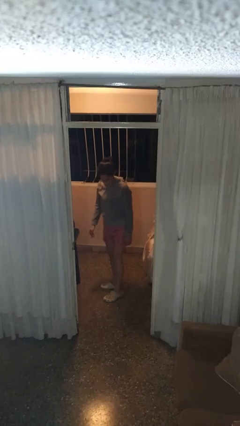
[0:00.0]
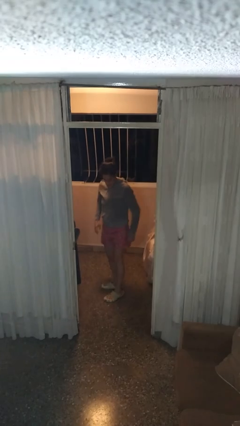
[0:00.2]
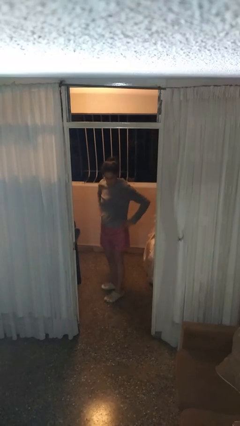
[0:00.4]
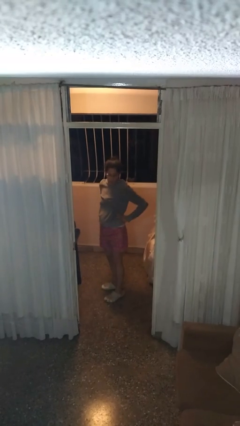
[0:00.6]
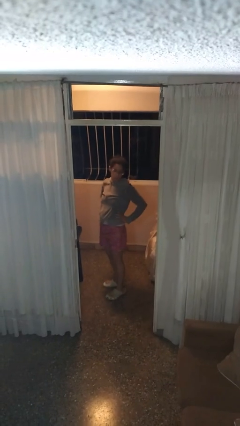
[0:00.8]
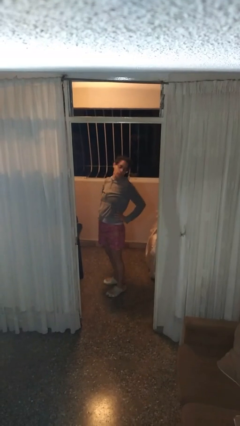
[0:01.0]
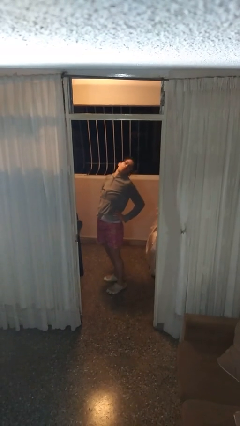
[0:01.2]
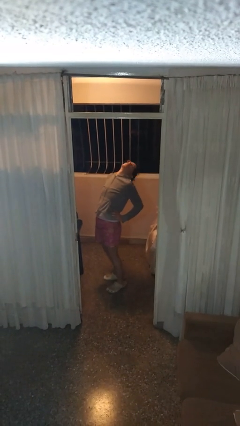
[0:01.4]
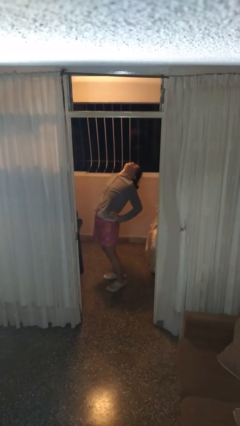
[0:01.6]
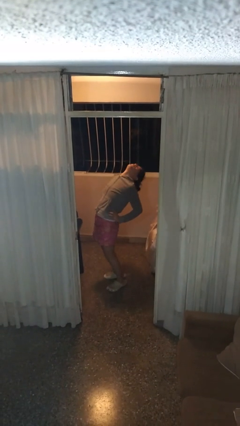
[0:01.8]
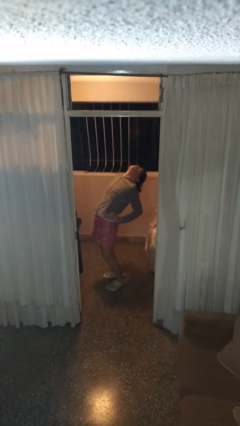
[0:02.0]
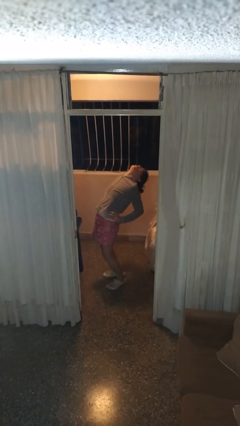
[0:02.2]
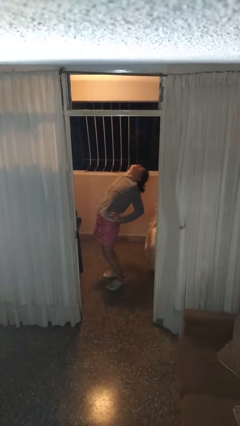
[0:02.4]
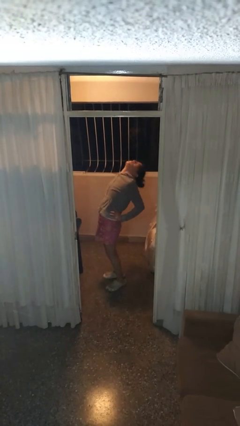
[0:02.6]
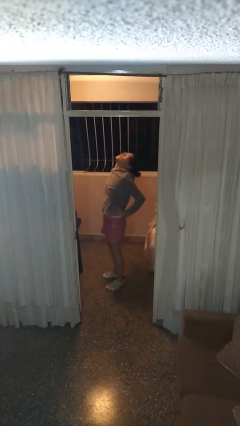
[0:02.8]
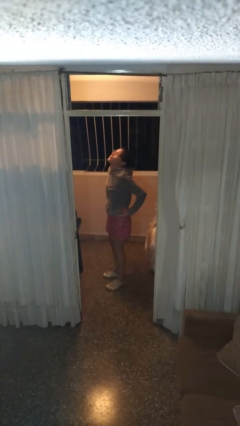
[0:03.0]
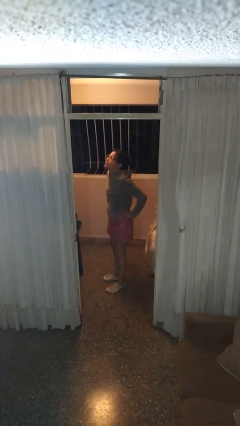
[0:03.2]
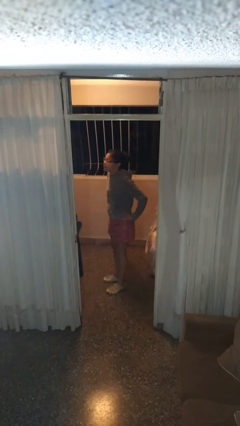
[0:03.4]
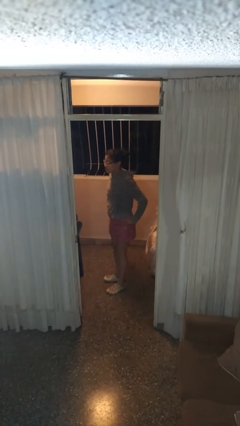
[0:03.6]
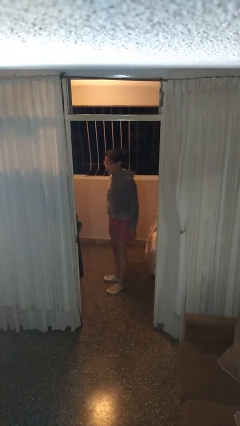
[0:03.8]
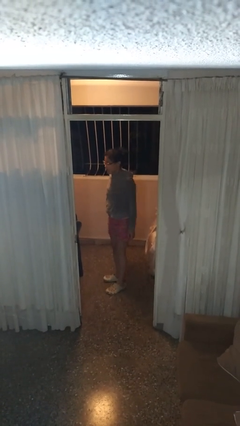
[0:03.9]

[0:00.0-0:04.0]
person stretches back

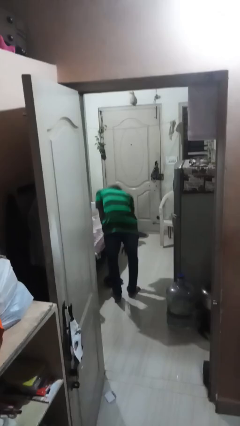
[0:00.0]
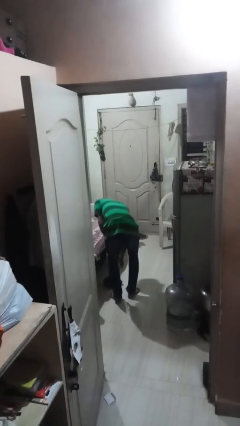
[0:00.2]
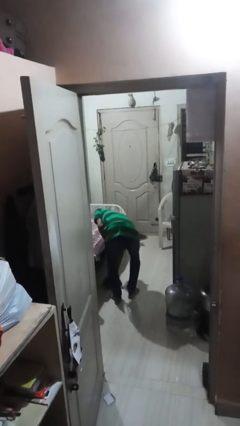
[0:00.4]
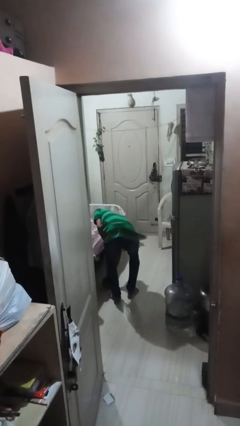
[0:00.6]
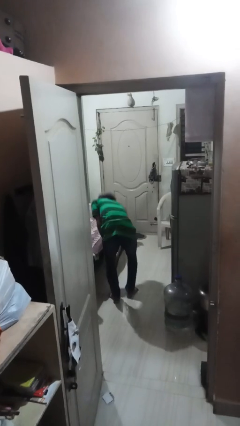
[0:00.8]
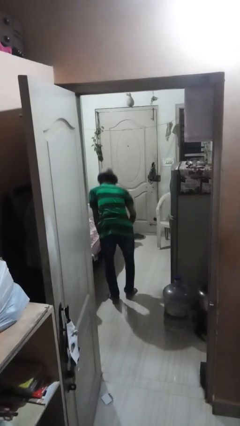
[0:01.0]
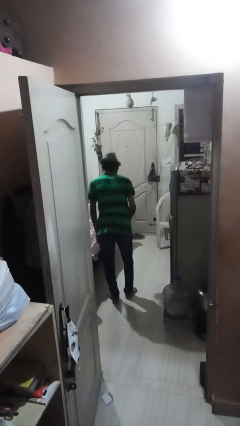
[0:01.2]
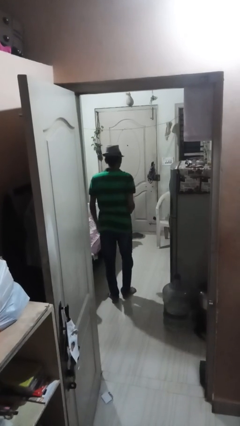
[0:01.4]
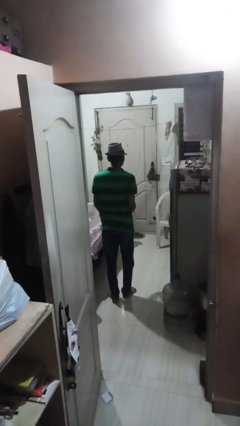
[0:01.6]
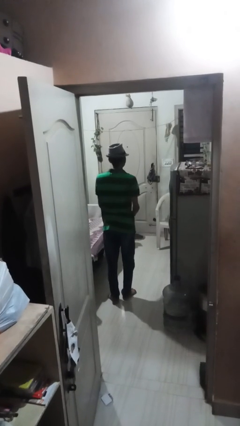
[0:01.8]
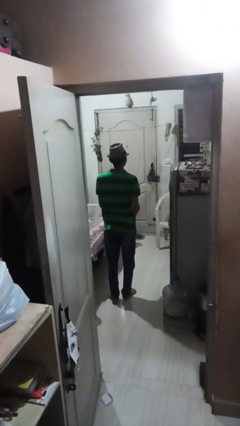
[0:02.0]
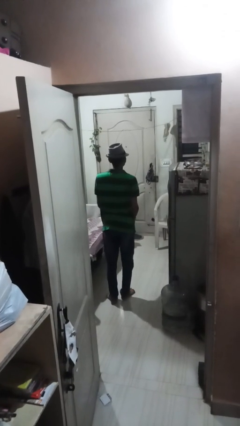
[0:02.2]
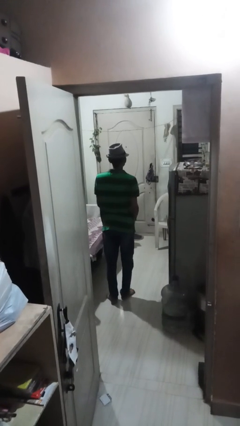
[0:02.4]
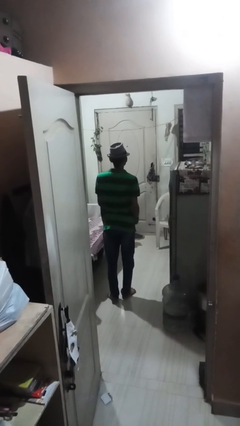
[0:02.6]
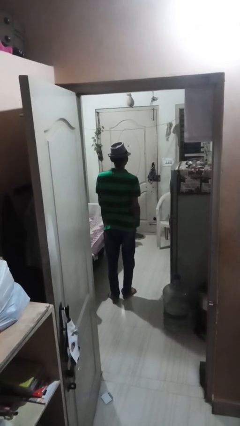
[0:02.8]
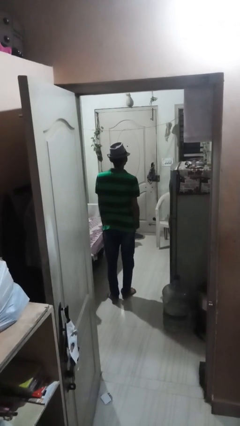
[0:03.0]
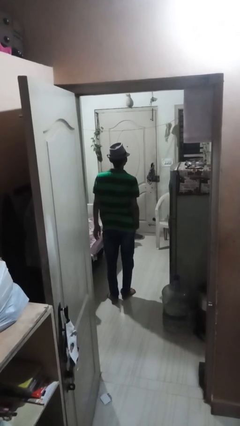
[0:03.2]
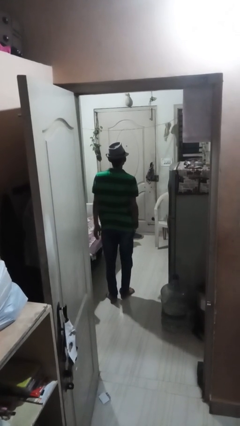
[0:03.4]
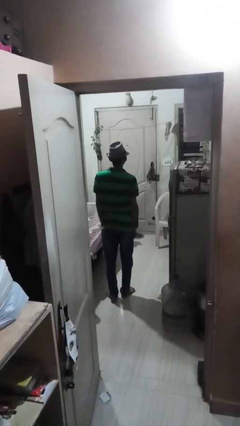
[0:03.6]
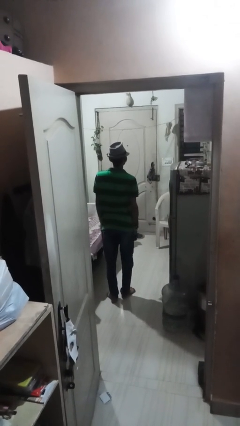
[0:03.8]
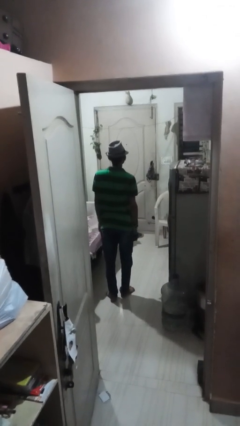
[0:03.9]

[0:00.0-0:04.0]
person picks up object from floor

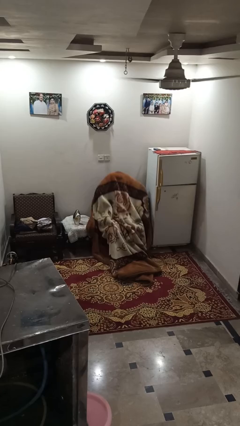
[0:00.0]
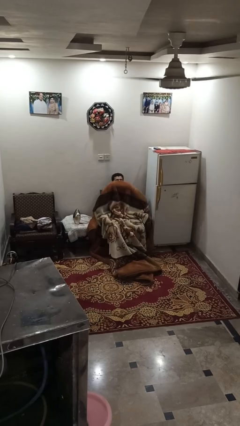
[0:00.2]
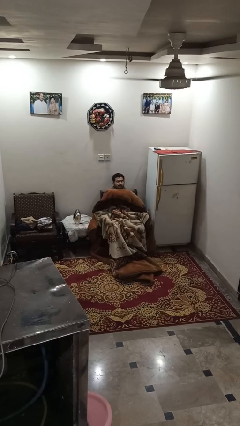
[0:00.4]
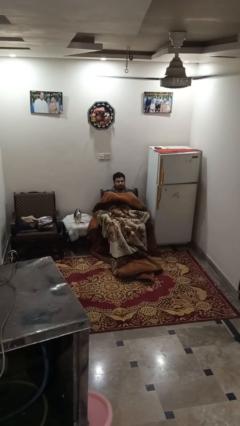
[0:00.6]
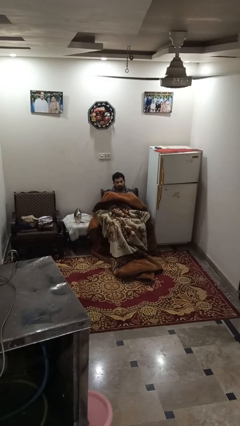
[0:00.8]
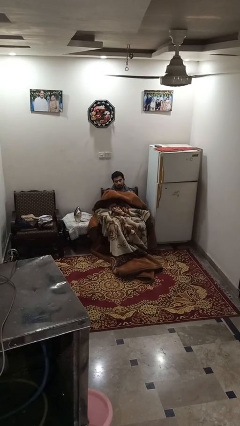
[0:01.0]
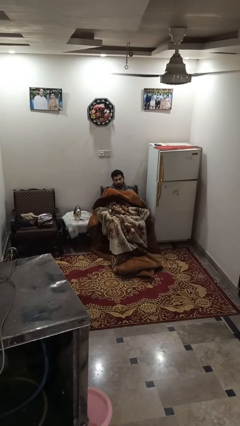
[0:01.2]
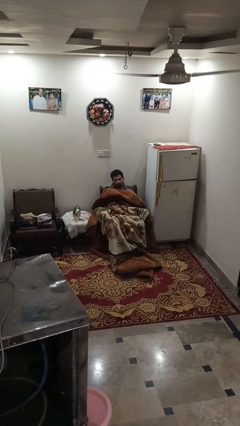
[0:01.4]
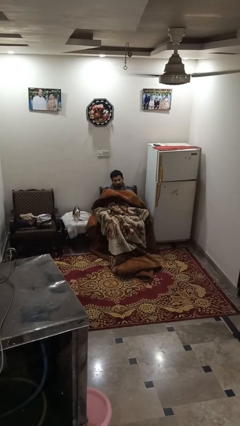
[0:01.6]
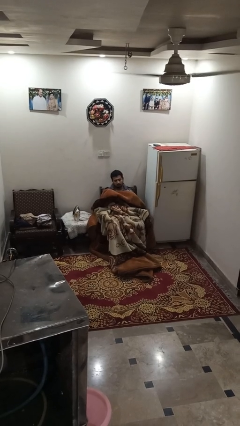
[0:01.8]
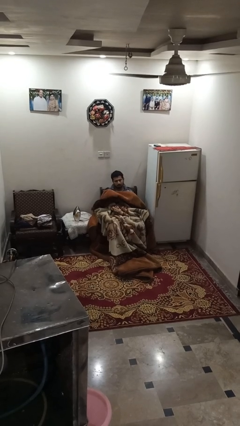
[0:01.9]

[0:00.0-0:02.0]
person uncovers with blanket

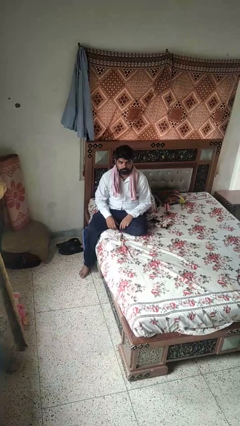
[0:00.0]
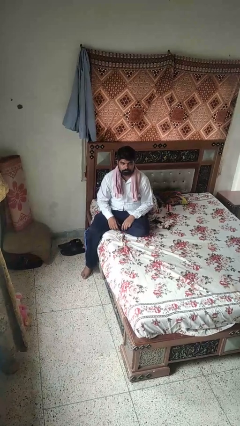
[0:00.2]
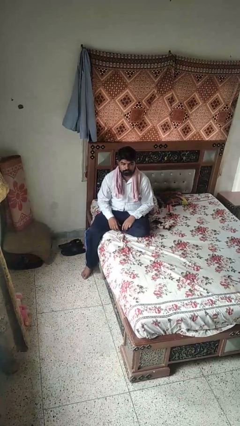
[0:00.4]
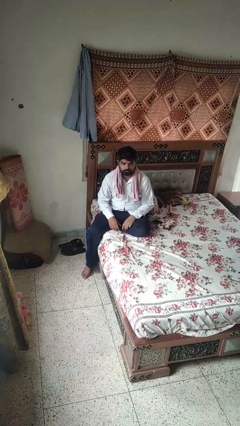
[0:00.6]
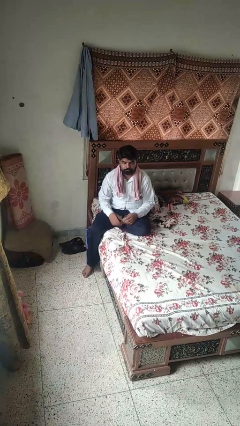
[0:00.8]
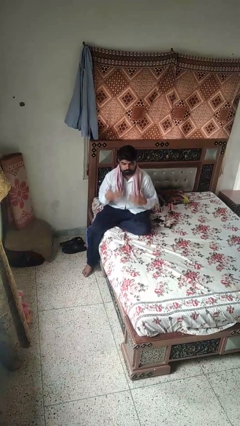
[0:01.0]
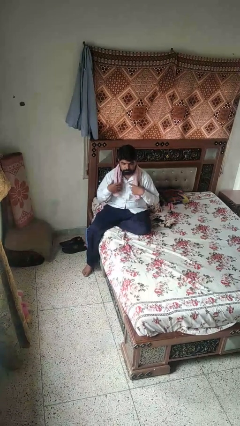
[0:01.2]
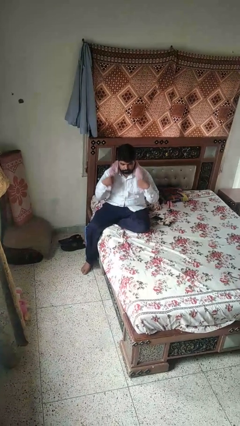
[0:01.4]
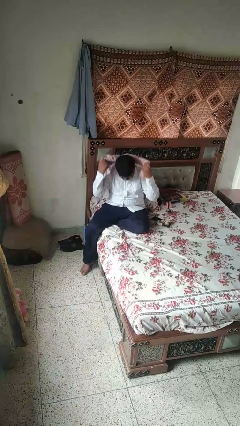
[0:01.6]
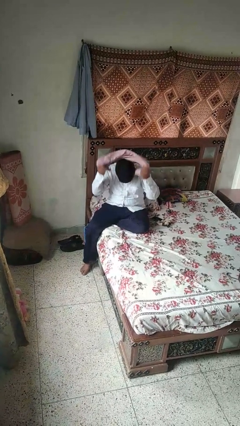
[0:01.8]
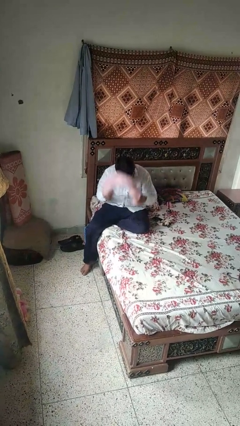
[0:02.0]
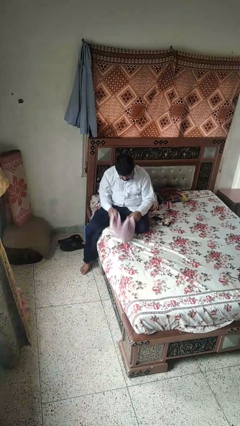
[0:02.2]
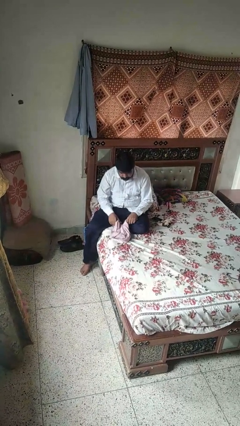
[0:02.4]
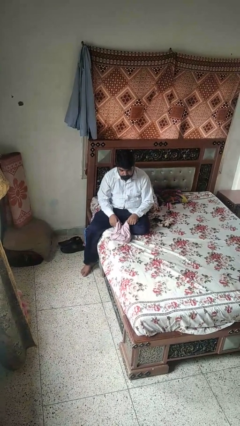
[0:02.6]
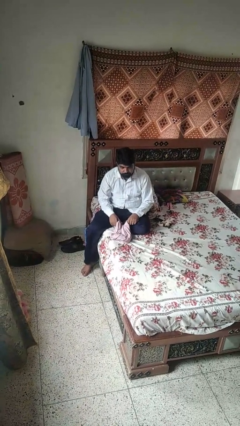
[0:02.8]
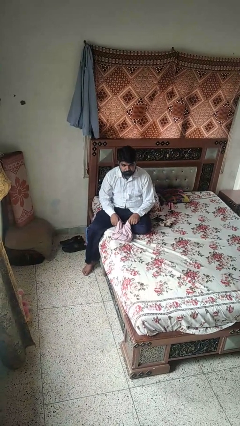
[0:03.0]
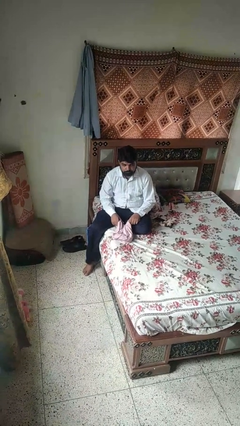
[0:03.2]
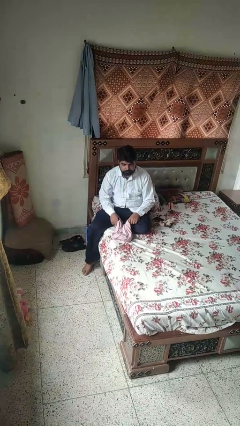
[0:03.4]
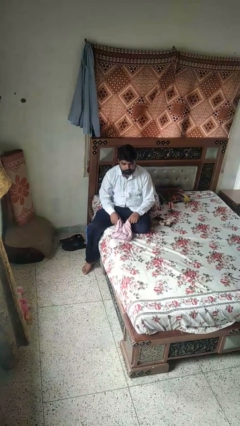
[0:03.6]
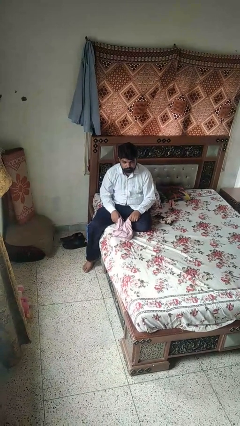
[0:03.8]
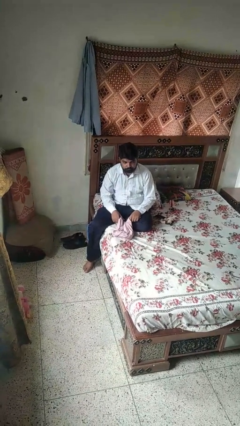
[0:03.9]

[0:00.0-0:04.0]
person takes off scarf

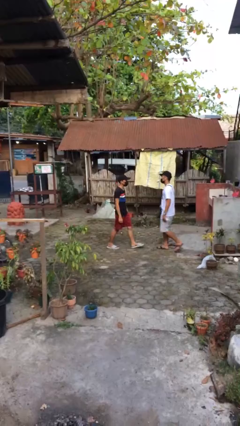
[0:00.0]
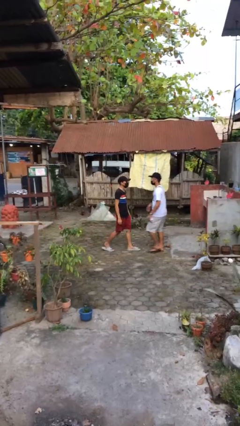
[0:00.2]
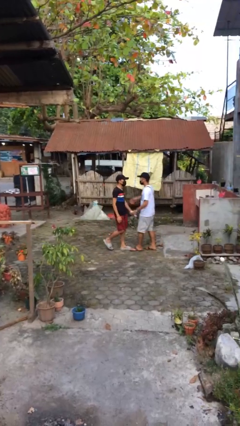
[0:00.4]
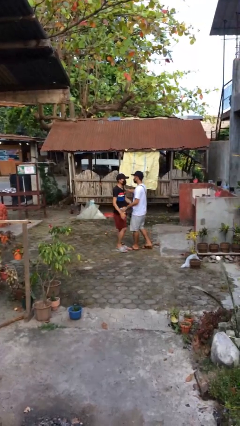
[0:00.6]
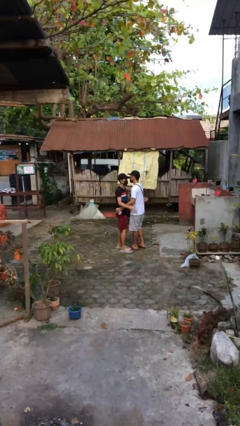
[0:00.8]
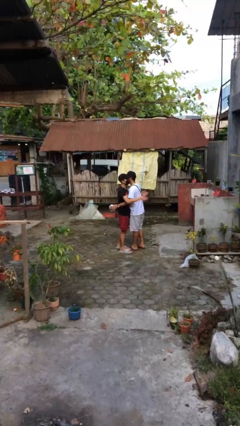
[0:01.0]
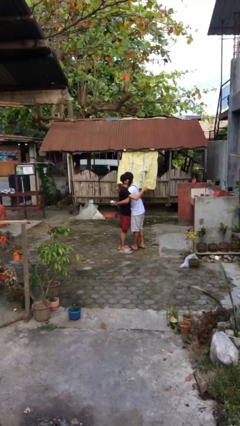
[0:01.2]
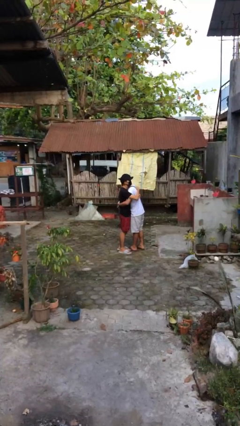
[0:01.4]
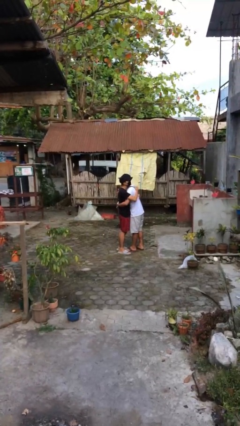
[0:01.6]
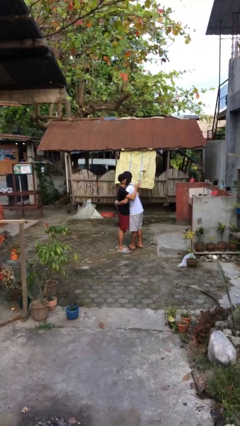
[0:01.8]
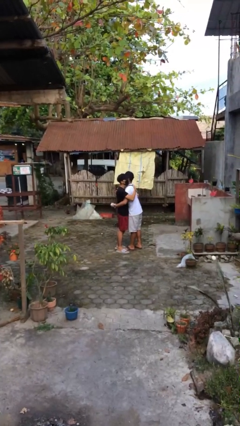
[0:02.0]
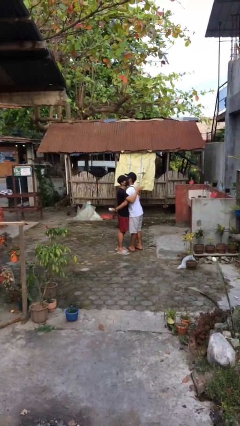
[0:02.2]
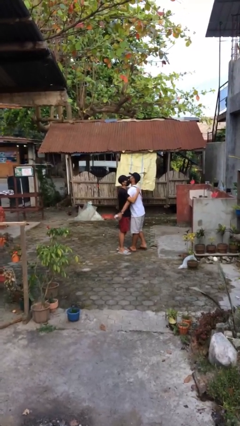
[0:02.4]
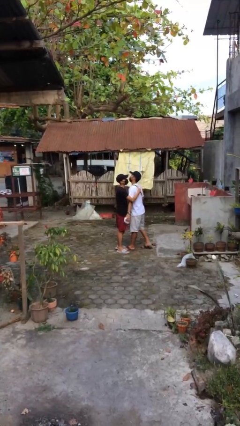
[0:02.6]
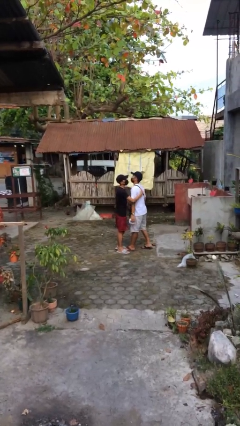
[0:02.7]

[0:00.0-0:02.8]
person embraces person

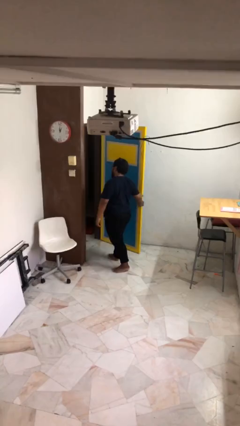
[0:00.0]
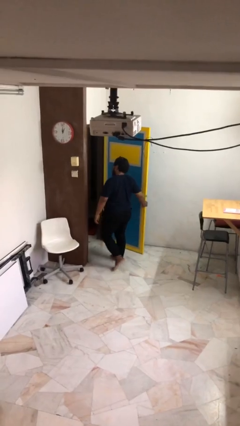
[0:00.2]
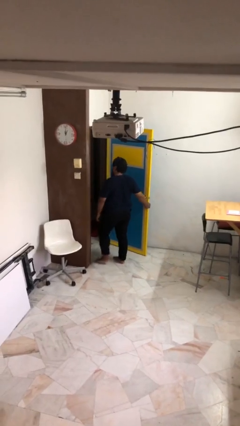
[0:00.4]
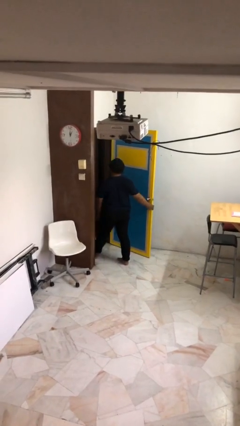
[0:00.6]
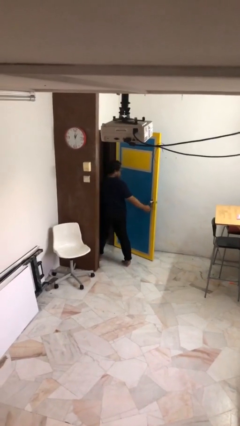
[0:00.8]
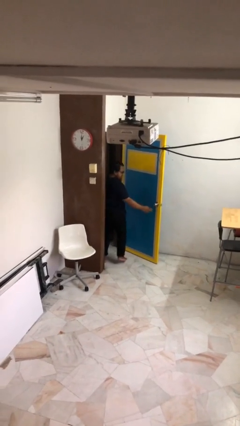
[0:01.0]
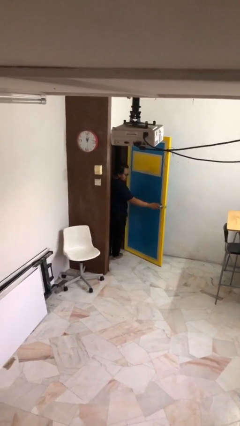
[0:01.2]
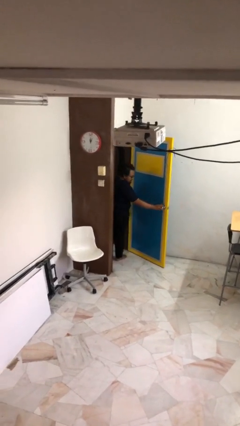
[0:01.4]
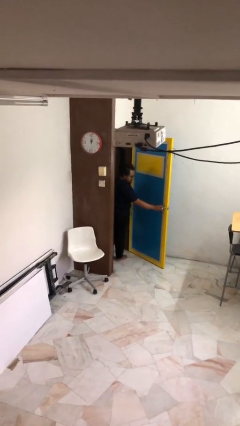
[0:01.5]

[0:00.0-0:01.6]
person exits scene through structure
